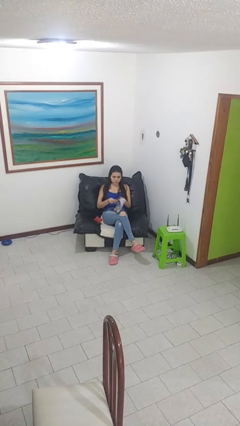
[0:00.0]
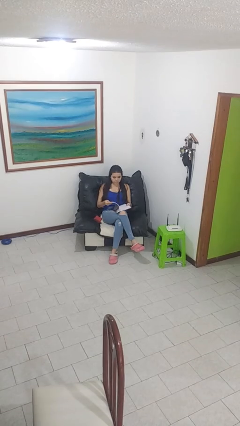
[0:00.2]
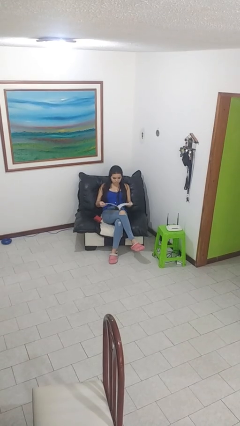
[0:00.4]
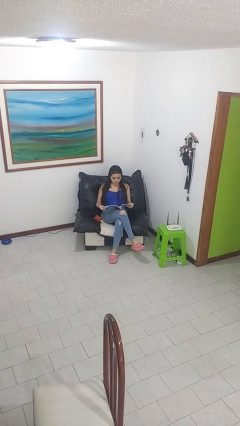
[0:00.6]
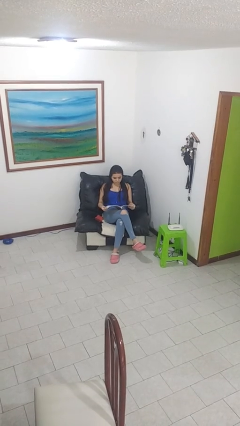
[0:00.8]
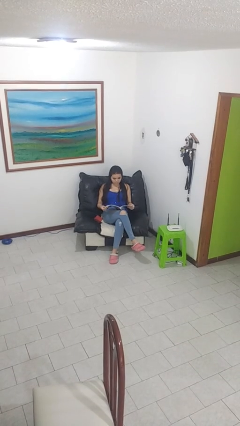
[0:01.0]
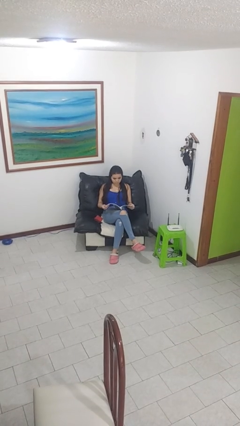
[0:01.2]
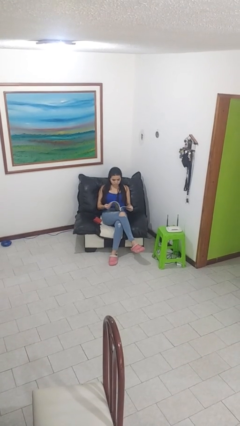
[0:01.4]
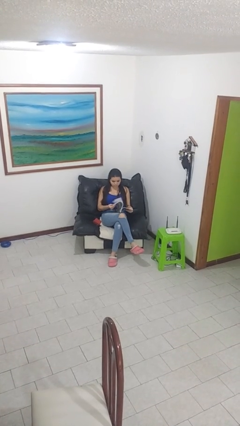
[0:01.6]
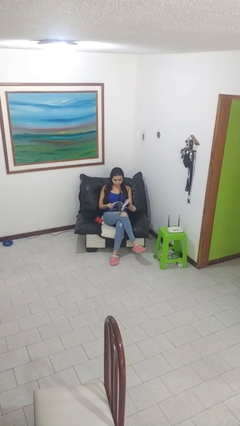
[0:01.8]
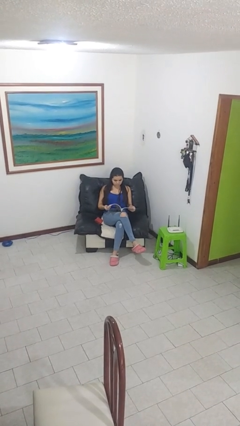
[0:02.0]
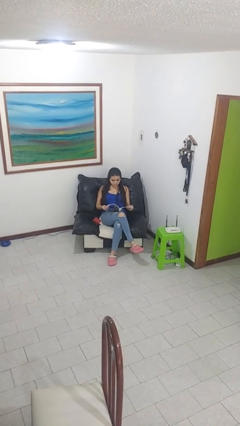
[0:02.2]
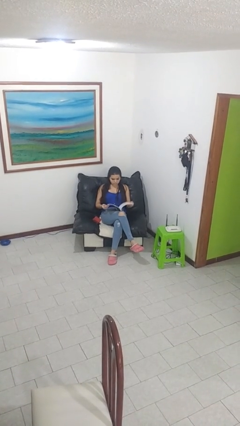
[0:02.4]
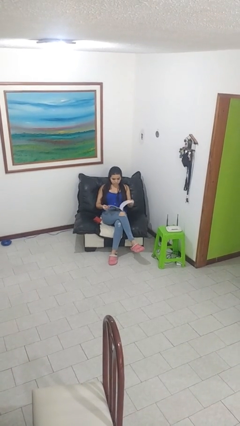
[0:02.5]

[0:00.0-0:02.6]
person reads magazine

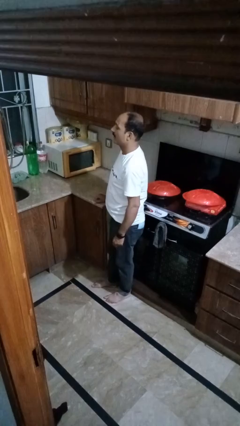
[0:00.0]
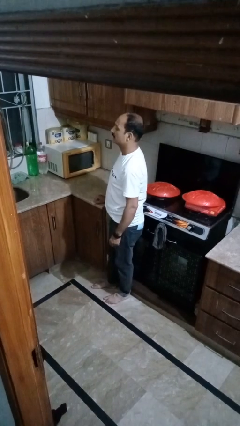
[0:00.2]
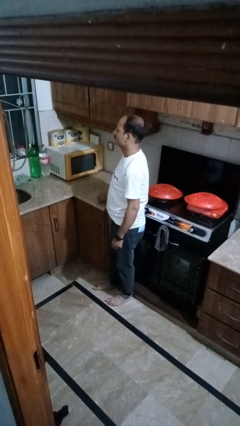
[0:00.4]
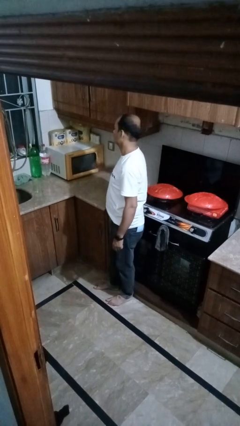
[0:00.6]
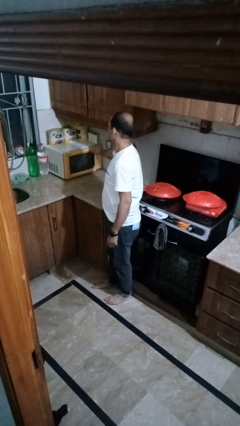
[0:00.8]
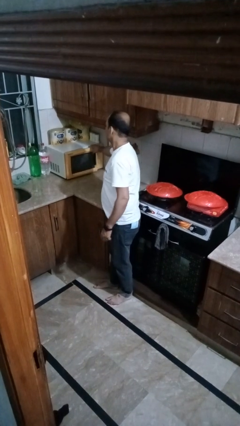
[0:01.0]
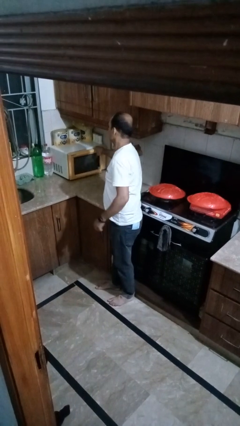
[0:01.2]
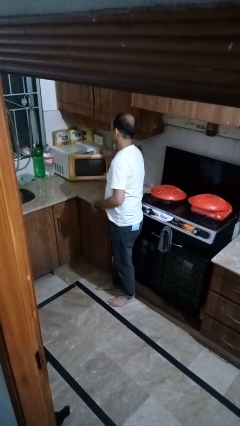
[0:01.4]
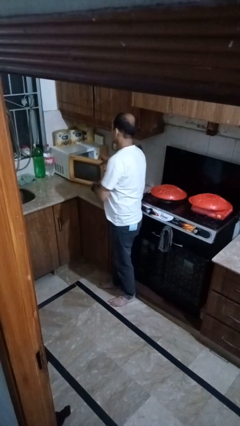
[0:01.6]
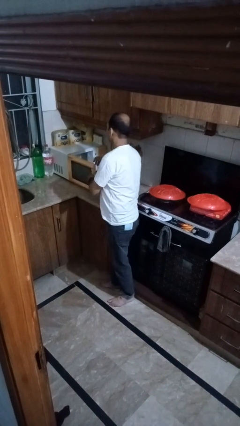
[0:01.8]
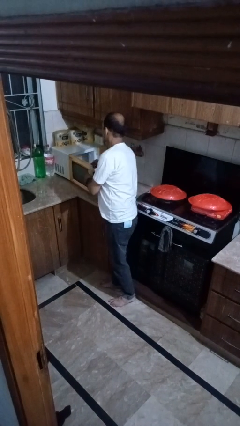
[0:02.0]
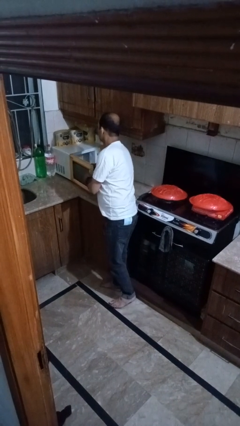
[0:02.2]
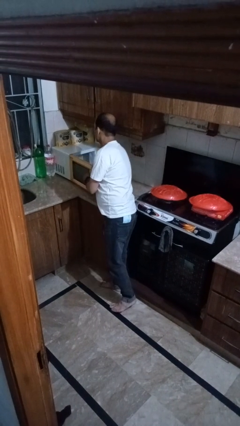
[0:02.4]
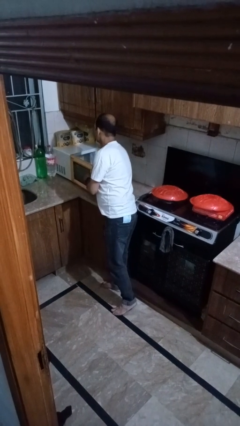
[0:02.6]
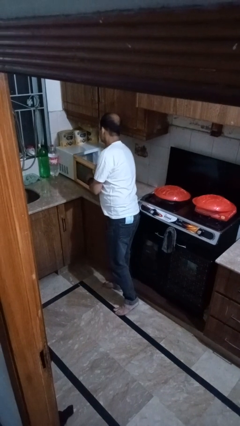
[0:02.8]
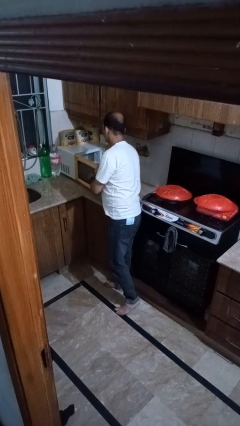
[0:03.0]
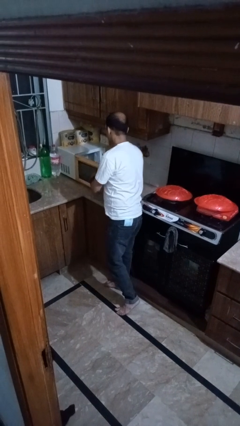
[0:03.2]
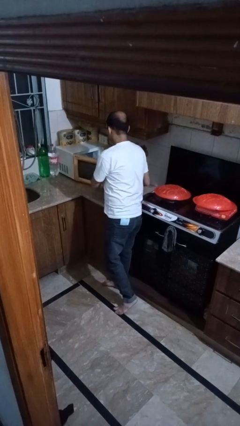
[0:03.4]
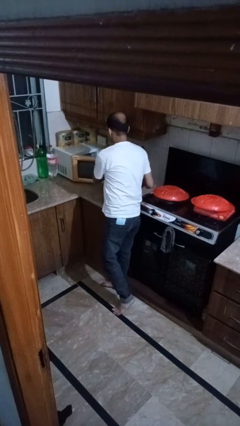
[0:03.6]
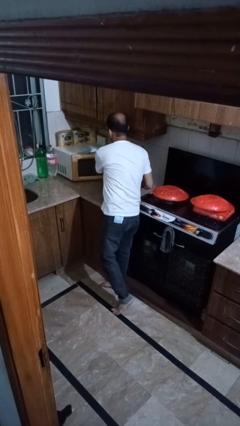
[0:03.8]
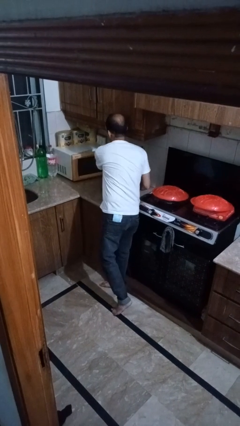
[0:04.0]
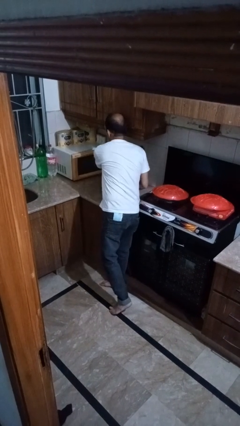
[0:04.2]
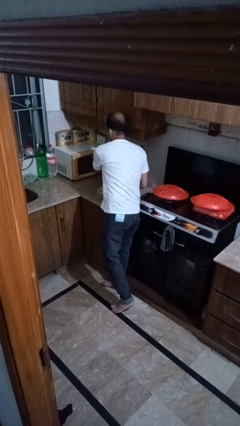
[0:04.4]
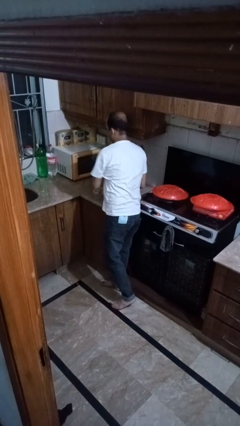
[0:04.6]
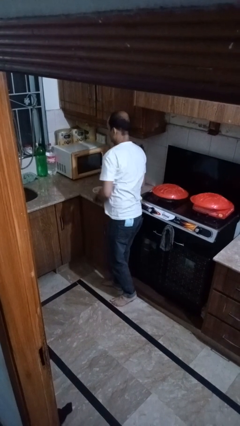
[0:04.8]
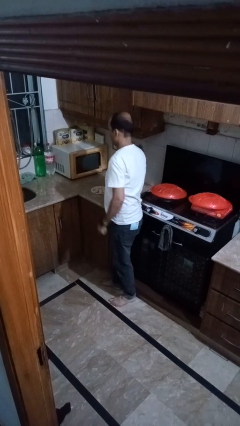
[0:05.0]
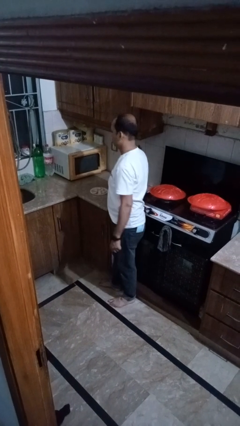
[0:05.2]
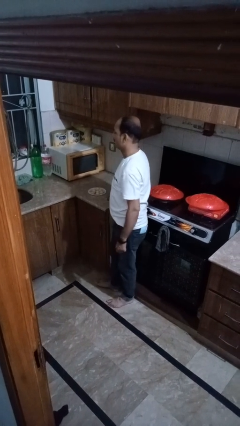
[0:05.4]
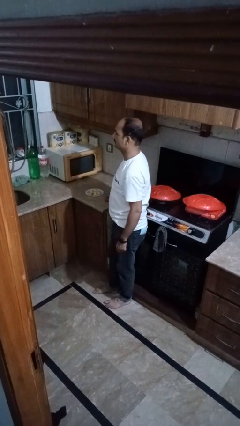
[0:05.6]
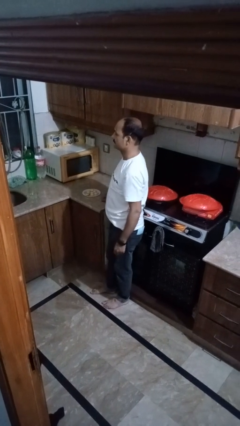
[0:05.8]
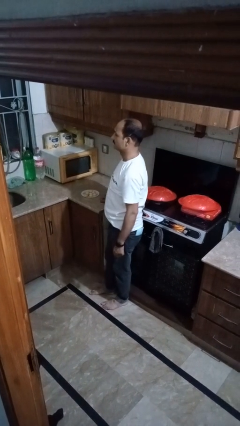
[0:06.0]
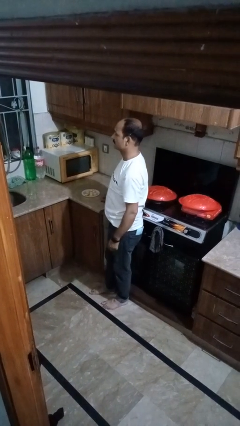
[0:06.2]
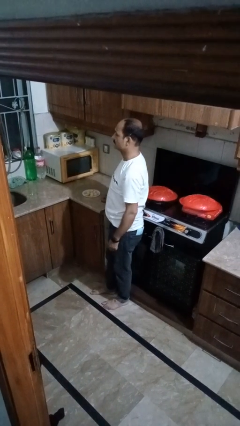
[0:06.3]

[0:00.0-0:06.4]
person takes object from microwave

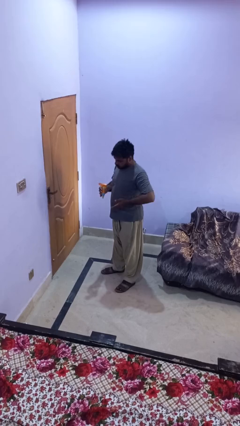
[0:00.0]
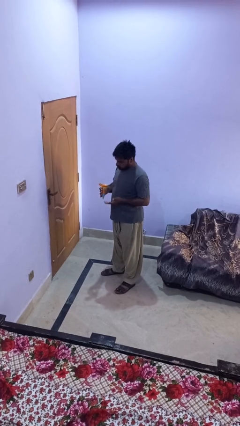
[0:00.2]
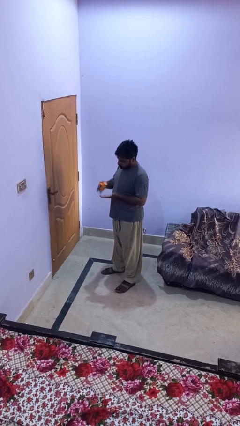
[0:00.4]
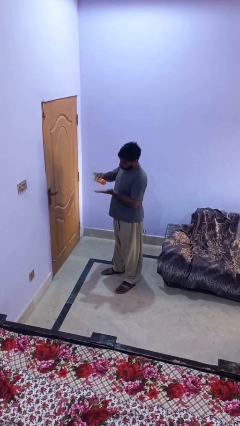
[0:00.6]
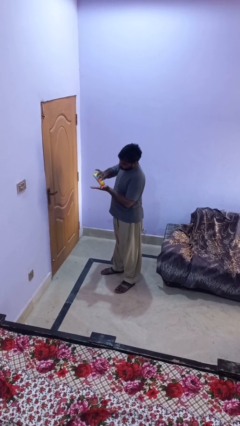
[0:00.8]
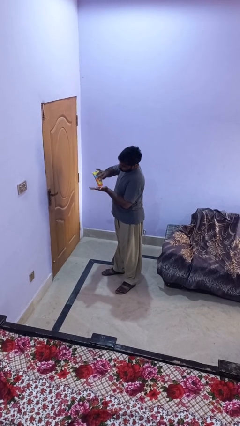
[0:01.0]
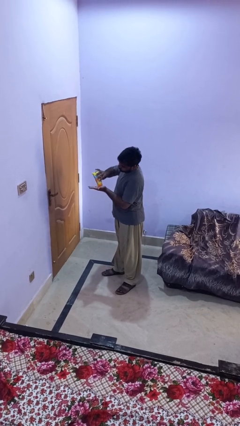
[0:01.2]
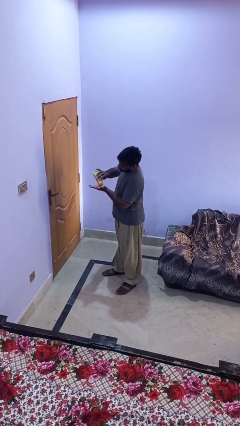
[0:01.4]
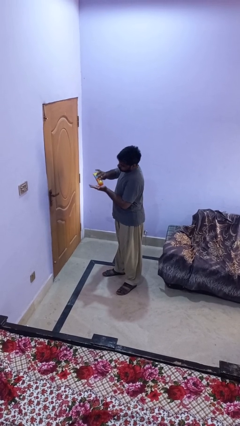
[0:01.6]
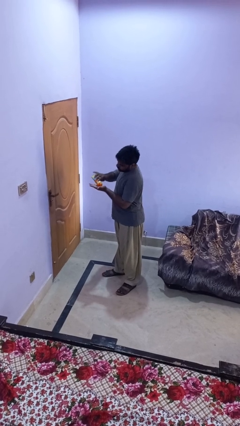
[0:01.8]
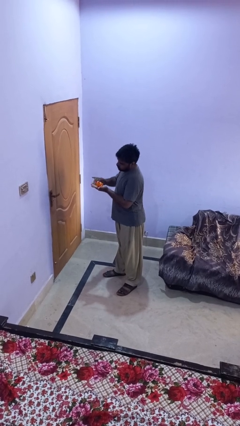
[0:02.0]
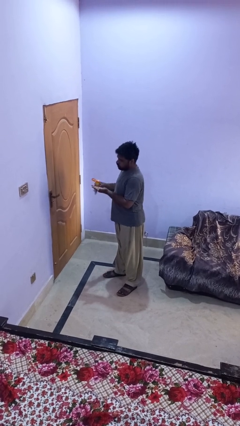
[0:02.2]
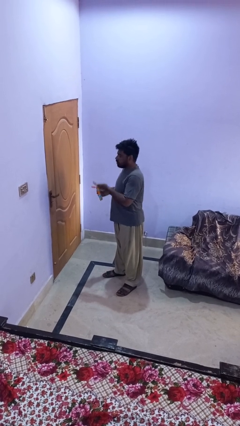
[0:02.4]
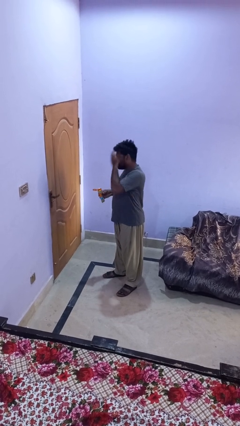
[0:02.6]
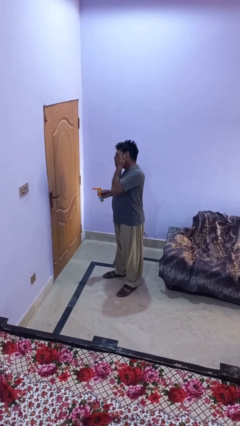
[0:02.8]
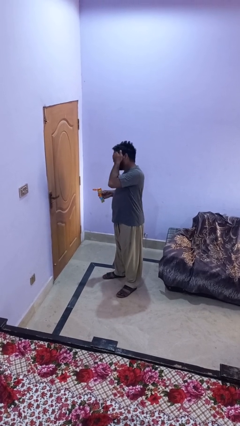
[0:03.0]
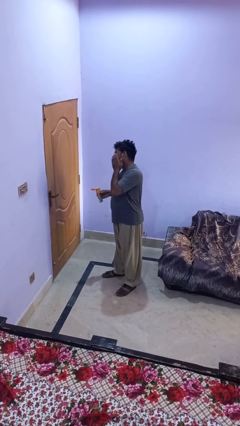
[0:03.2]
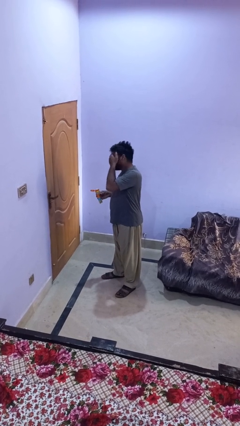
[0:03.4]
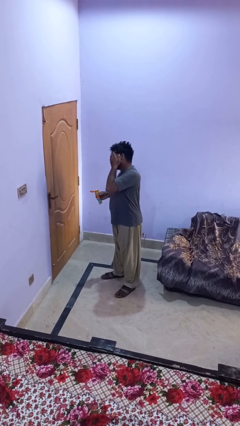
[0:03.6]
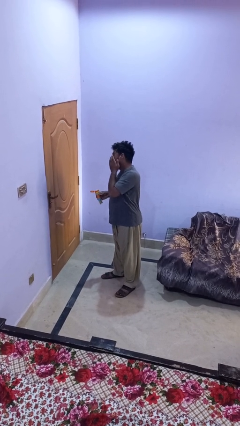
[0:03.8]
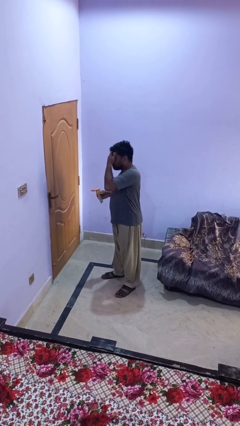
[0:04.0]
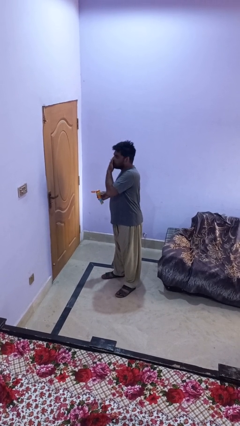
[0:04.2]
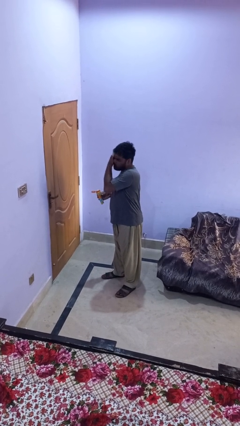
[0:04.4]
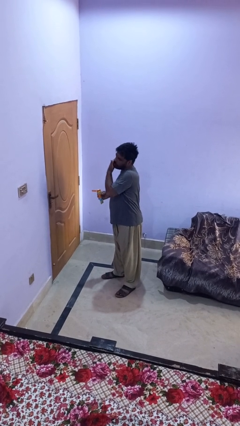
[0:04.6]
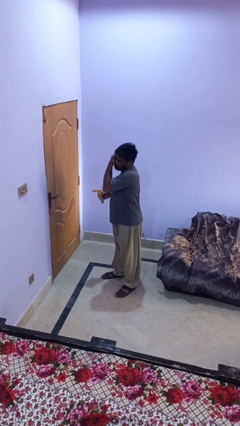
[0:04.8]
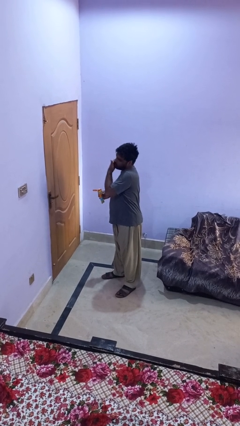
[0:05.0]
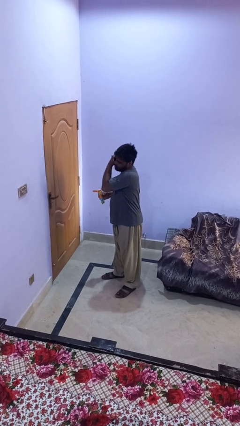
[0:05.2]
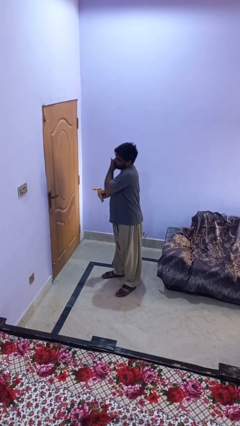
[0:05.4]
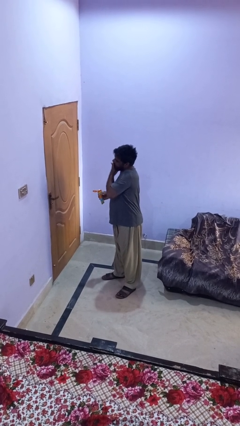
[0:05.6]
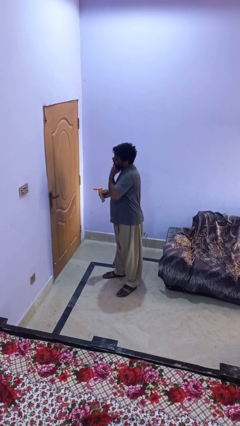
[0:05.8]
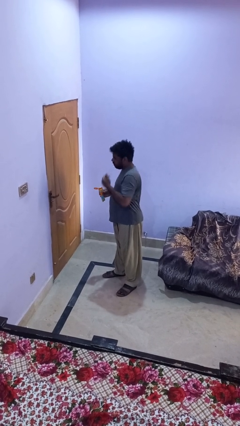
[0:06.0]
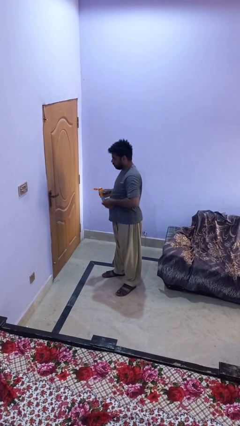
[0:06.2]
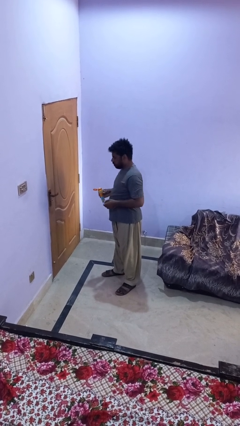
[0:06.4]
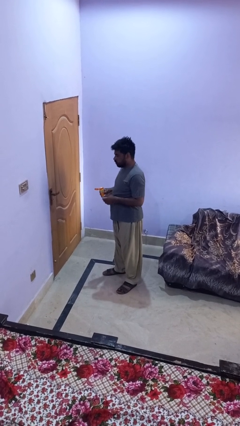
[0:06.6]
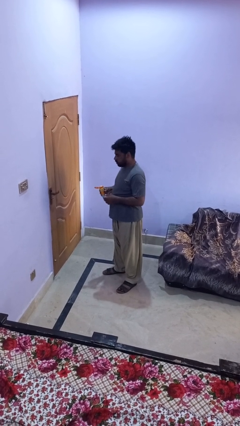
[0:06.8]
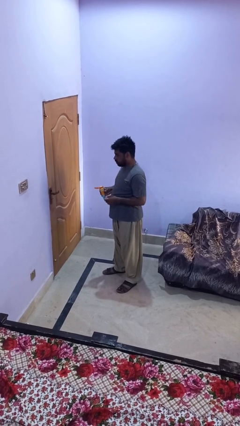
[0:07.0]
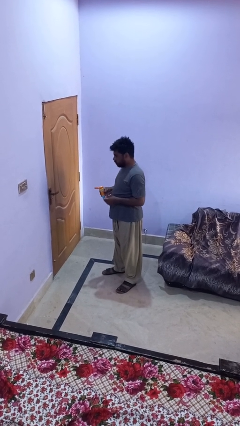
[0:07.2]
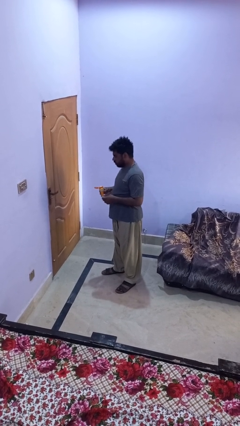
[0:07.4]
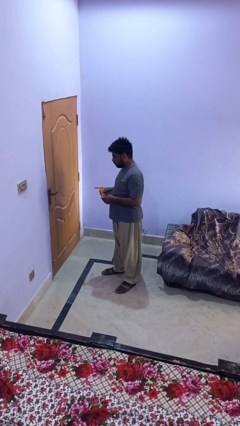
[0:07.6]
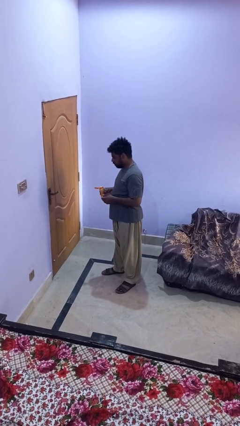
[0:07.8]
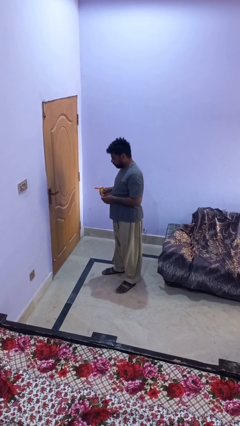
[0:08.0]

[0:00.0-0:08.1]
person applies facial moisturizer

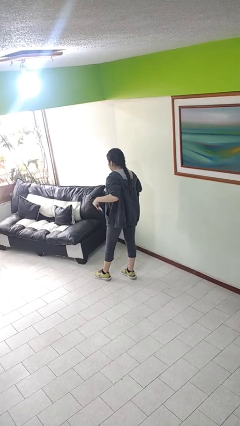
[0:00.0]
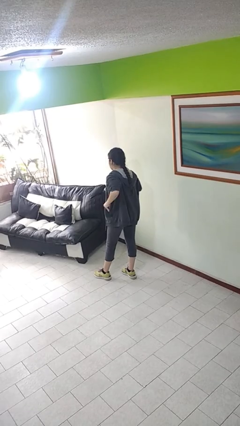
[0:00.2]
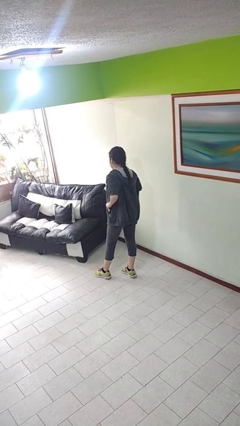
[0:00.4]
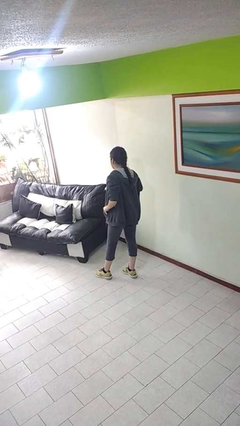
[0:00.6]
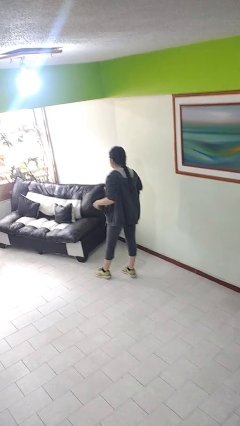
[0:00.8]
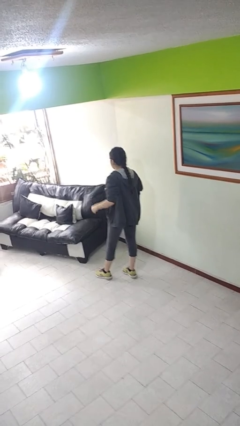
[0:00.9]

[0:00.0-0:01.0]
person puts phone into pocket
